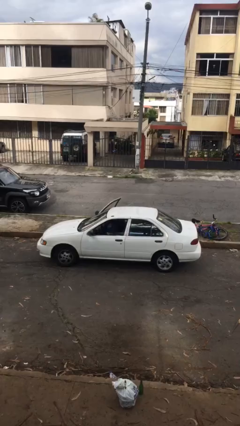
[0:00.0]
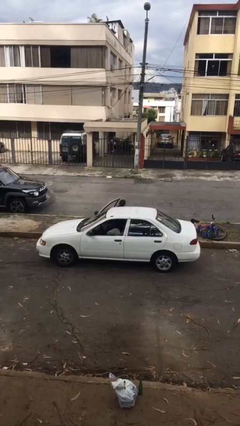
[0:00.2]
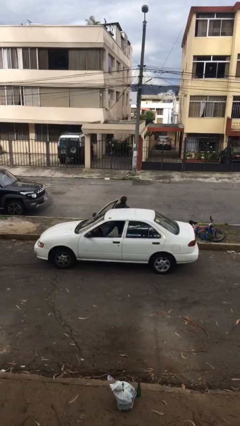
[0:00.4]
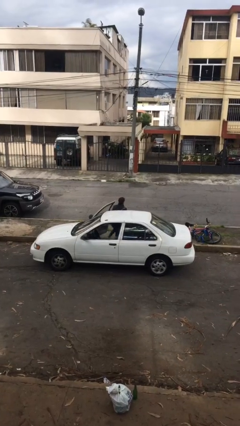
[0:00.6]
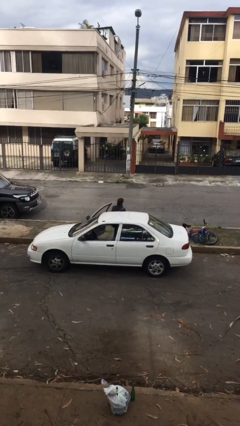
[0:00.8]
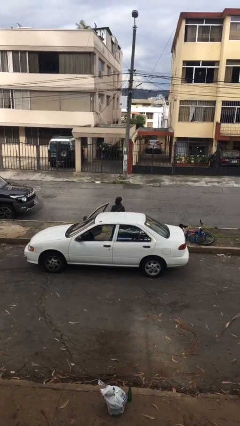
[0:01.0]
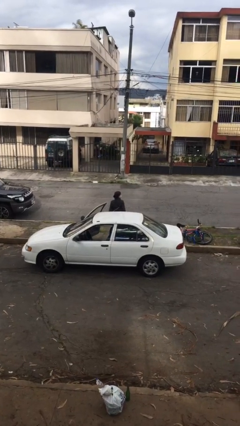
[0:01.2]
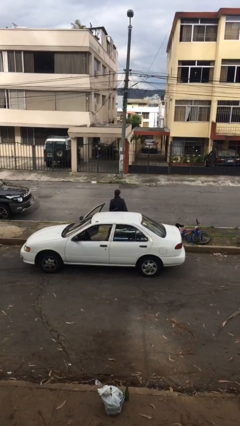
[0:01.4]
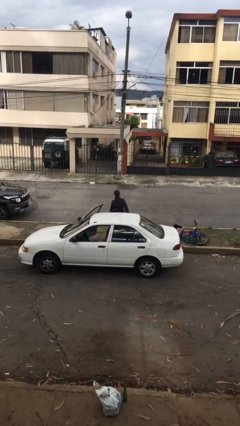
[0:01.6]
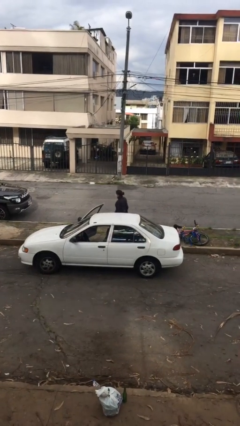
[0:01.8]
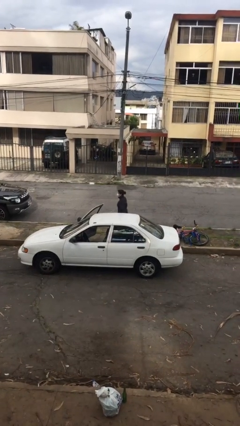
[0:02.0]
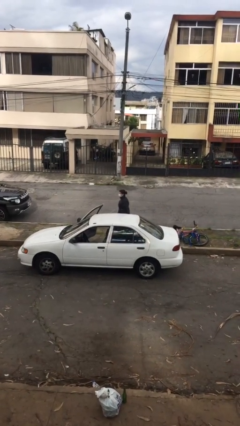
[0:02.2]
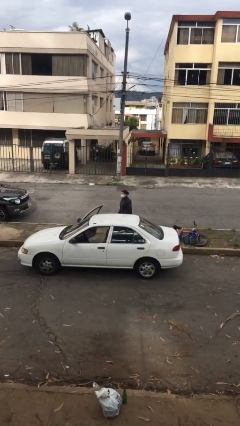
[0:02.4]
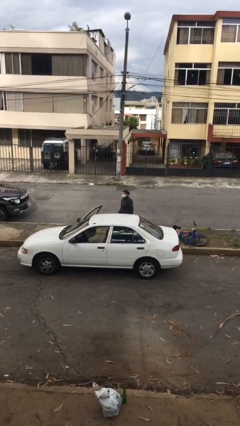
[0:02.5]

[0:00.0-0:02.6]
person exits car

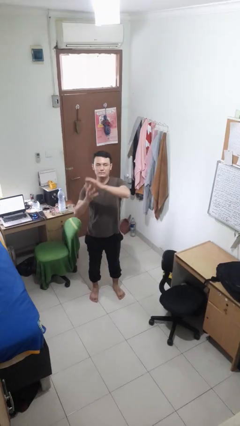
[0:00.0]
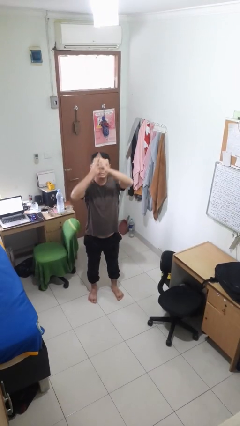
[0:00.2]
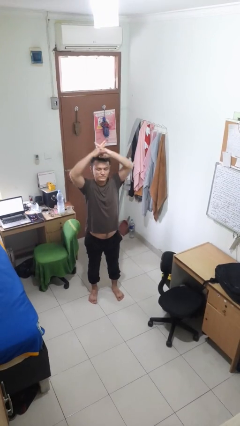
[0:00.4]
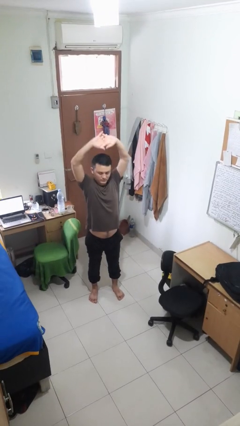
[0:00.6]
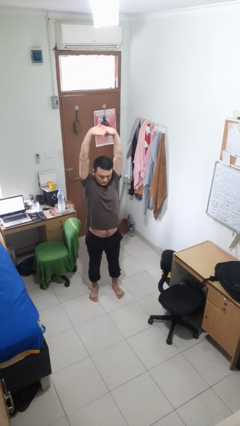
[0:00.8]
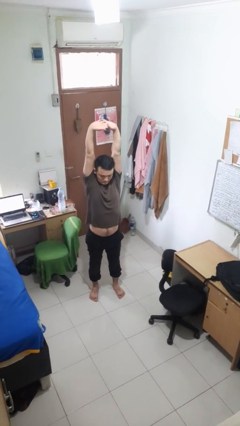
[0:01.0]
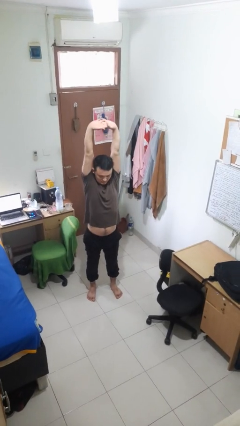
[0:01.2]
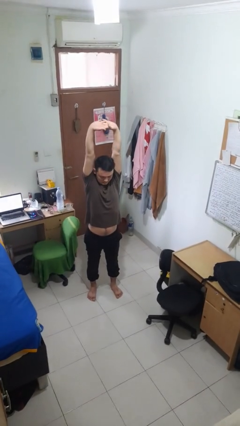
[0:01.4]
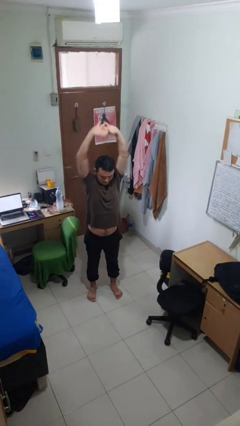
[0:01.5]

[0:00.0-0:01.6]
person stretches arms over head

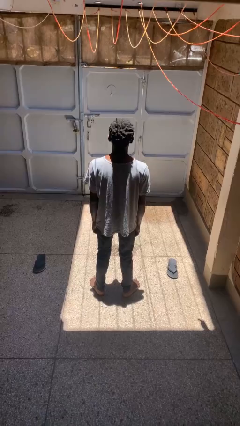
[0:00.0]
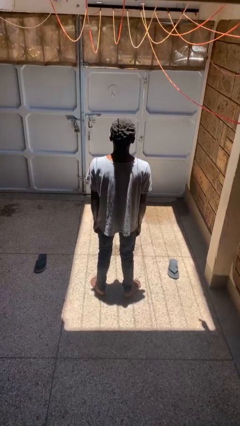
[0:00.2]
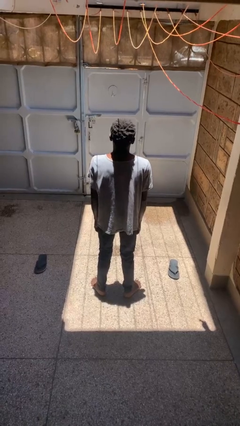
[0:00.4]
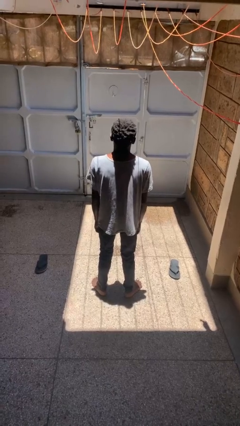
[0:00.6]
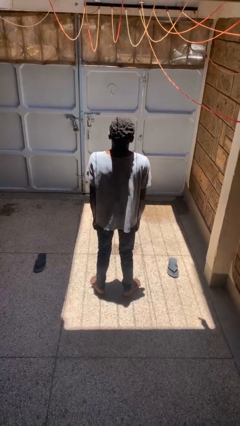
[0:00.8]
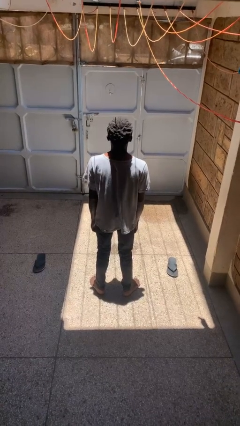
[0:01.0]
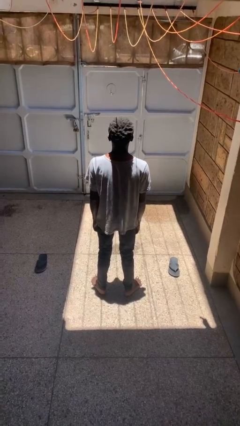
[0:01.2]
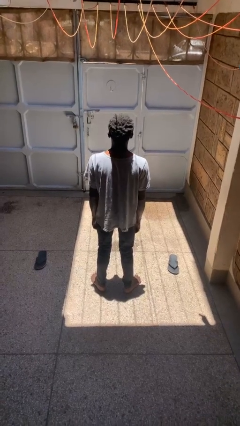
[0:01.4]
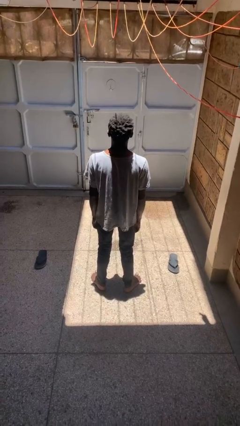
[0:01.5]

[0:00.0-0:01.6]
person shrugs

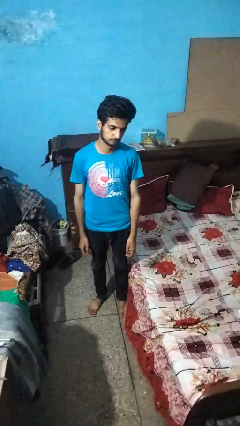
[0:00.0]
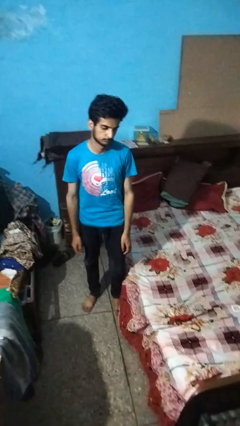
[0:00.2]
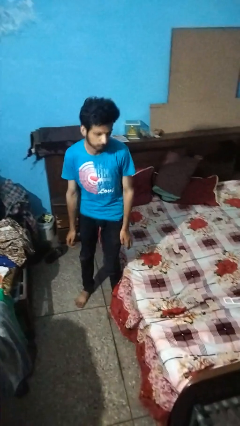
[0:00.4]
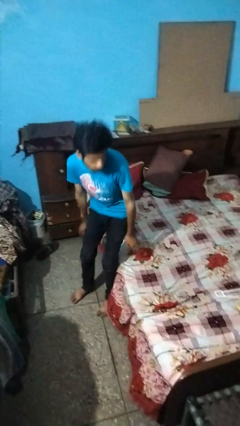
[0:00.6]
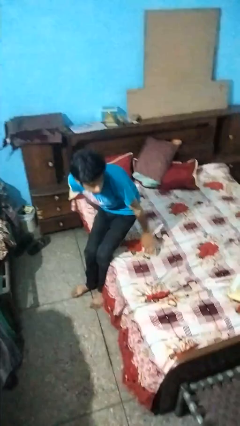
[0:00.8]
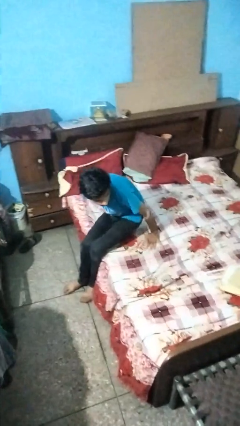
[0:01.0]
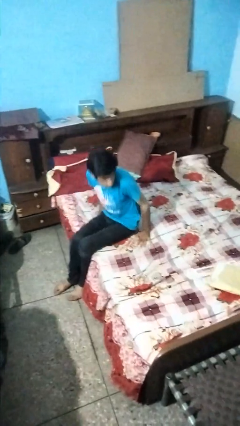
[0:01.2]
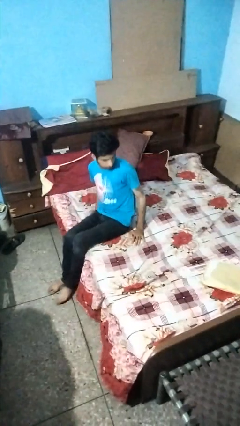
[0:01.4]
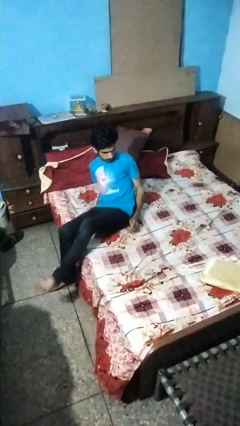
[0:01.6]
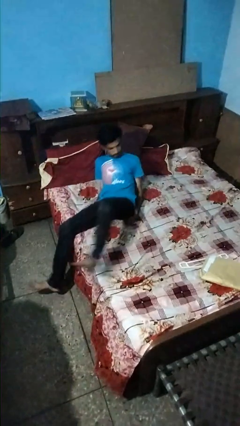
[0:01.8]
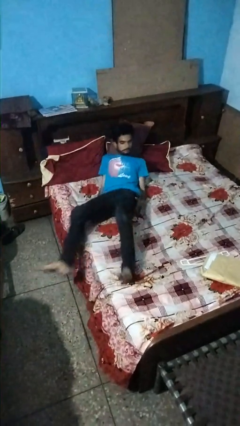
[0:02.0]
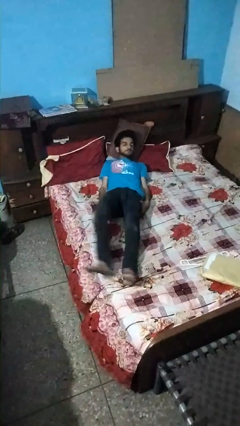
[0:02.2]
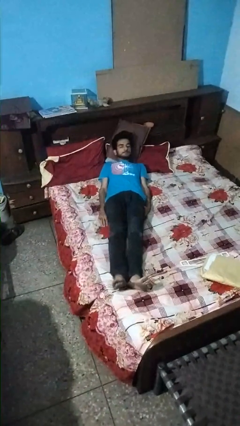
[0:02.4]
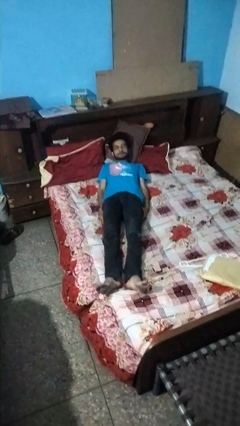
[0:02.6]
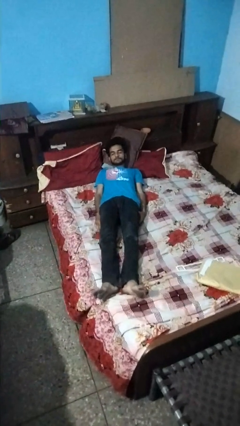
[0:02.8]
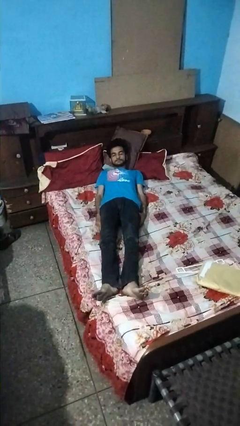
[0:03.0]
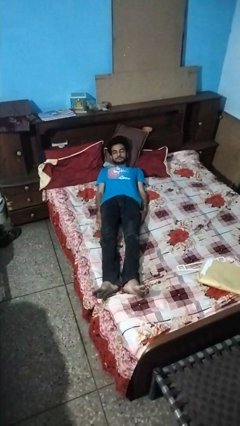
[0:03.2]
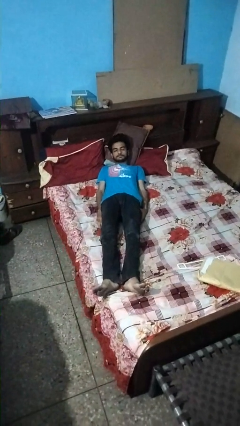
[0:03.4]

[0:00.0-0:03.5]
person lies down on bed

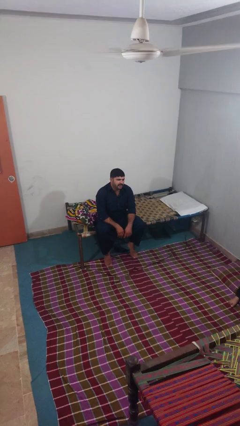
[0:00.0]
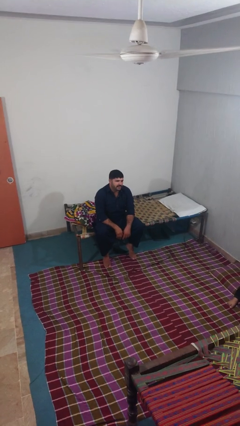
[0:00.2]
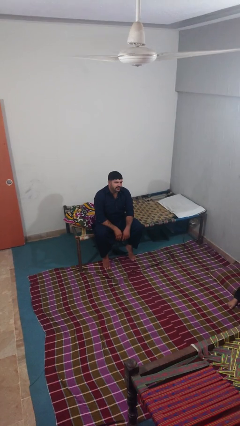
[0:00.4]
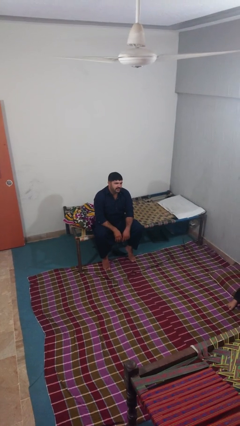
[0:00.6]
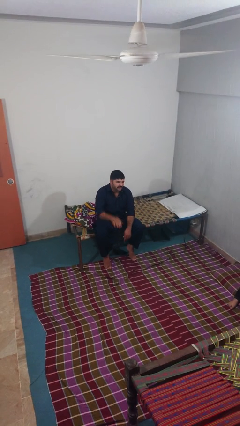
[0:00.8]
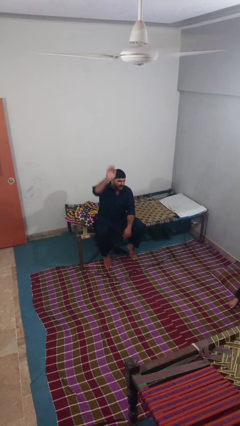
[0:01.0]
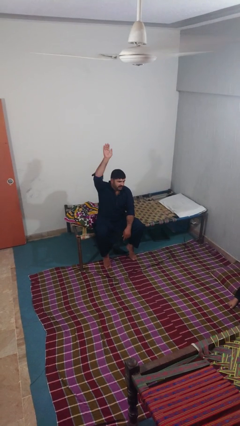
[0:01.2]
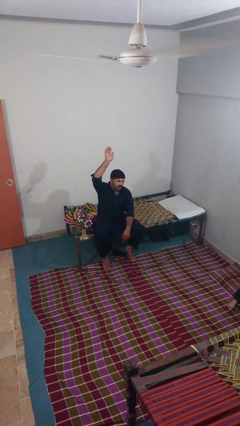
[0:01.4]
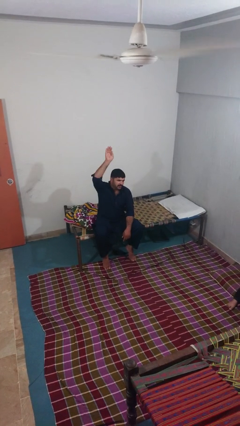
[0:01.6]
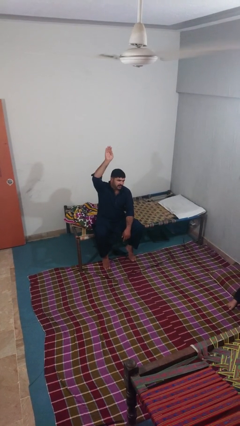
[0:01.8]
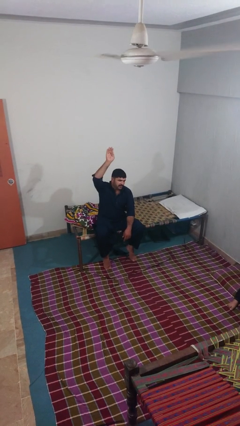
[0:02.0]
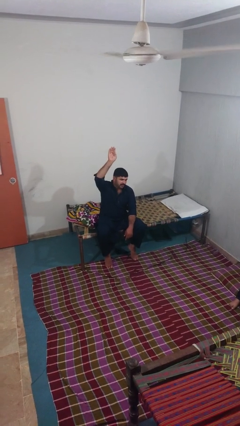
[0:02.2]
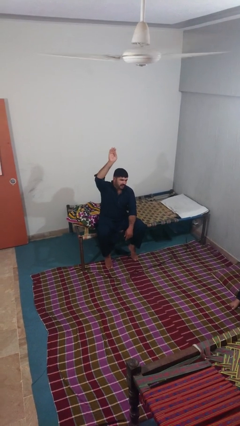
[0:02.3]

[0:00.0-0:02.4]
person gestures raise hand

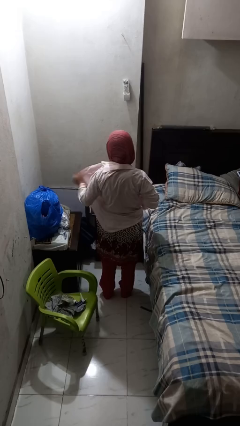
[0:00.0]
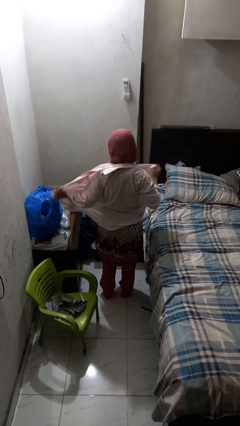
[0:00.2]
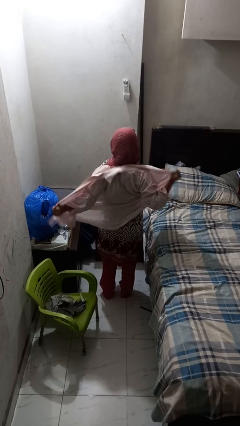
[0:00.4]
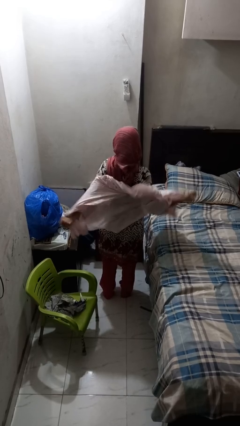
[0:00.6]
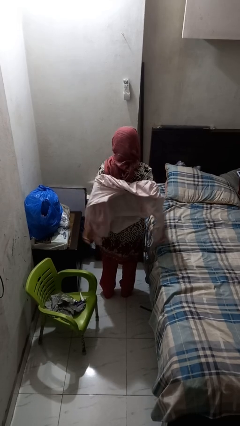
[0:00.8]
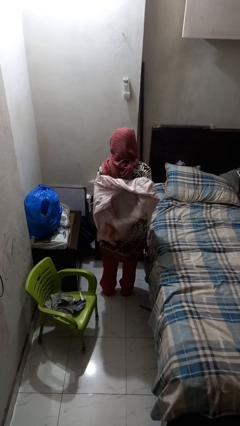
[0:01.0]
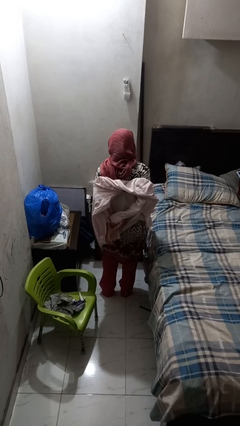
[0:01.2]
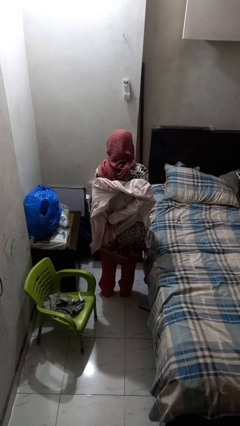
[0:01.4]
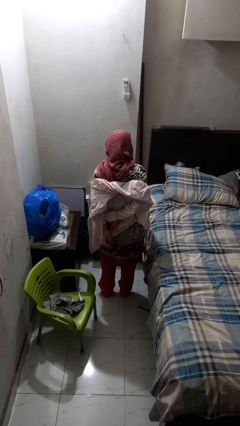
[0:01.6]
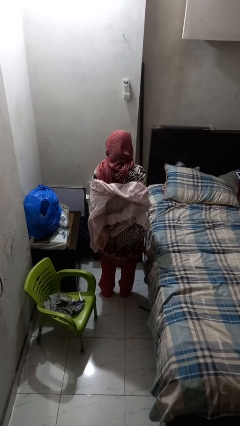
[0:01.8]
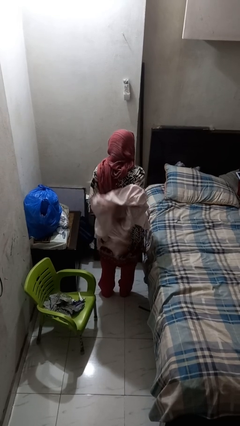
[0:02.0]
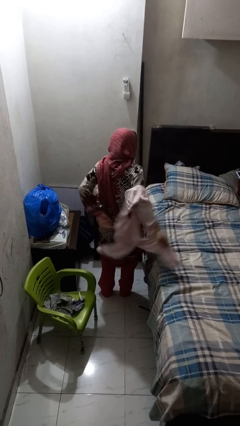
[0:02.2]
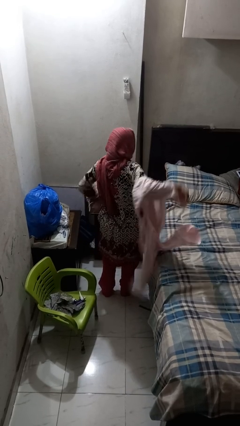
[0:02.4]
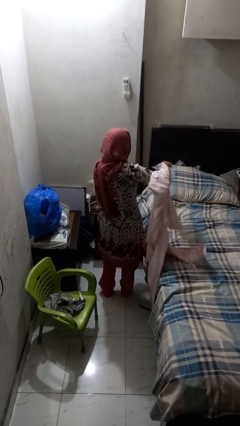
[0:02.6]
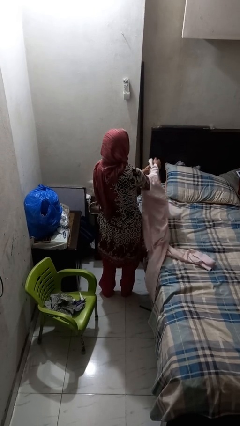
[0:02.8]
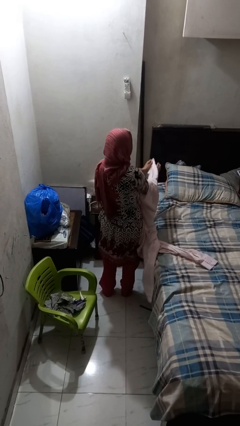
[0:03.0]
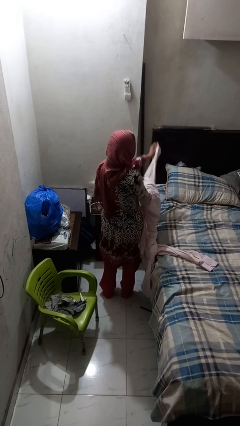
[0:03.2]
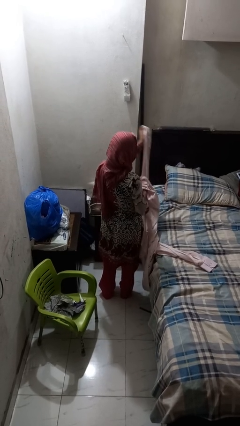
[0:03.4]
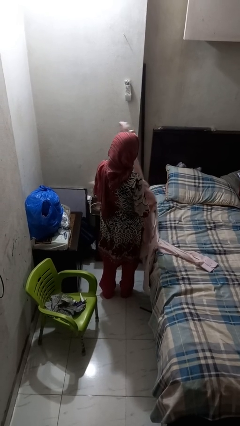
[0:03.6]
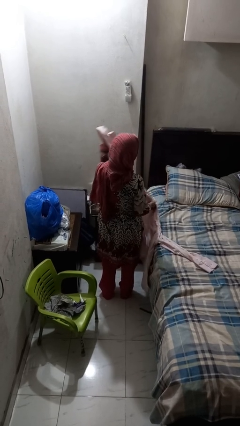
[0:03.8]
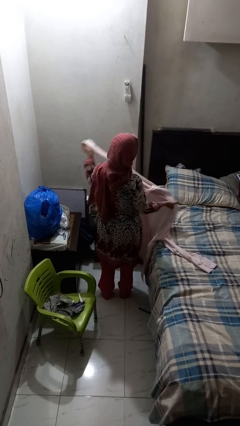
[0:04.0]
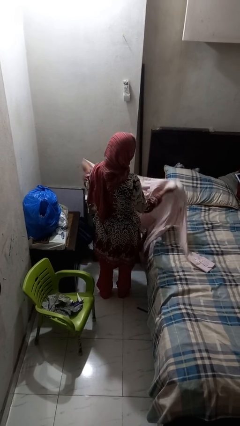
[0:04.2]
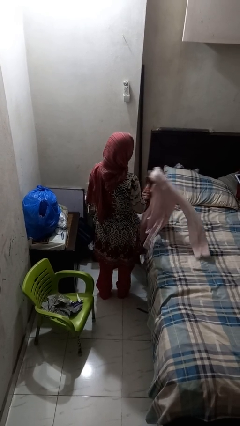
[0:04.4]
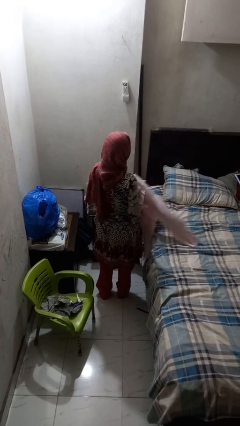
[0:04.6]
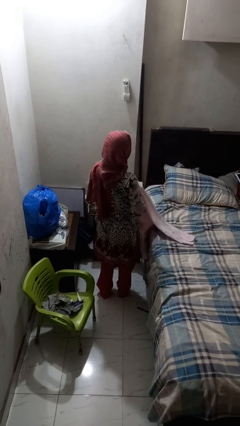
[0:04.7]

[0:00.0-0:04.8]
person takes off shirt

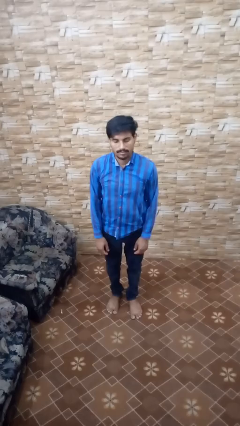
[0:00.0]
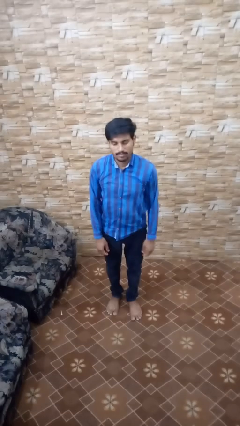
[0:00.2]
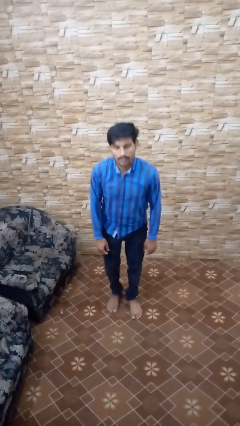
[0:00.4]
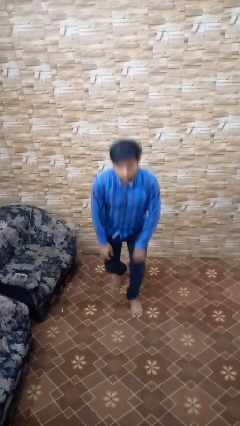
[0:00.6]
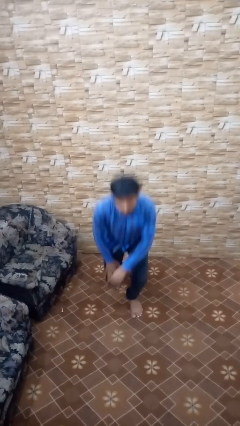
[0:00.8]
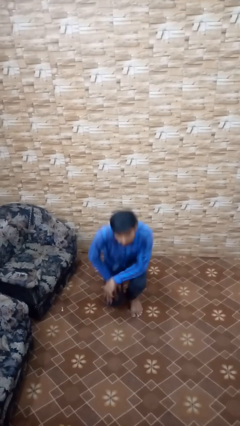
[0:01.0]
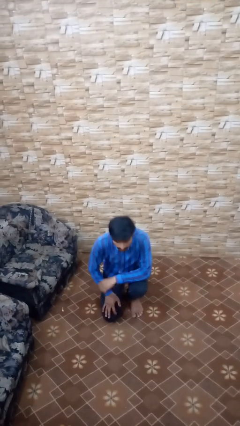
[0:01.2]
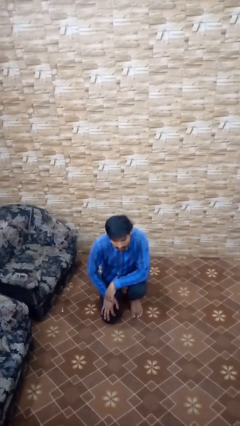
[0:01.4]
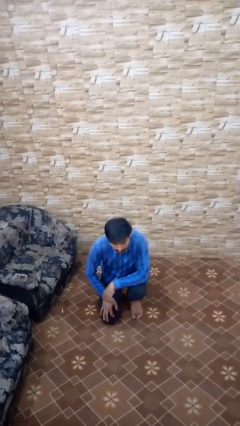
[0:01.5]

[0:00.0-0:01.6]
person kneels
